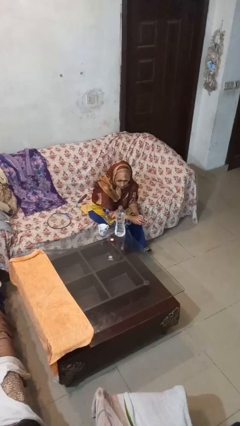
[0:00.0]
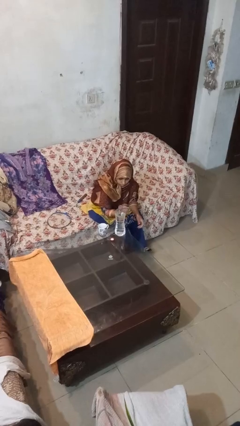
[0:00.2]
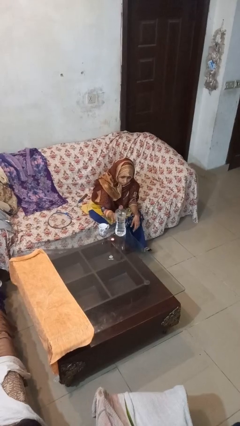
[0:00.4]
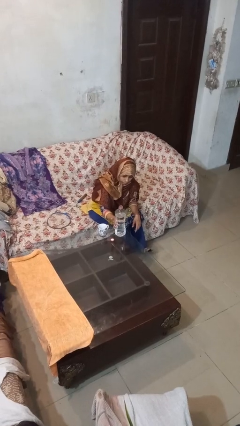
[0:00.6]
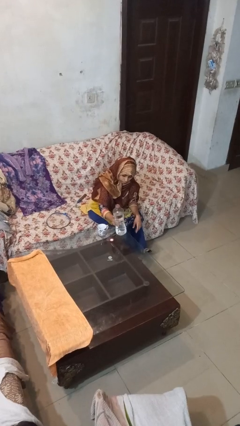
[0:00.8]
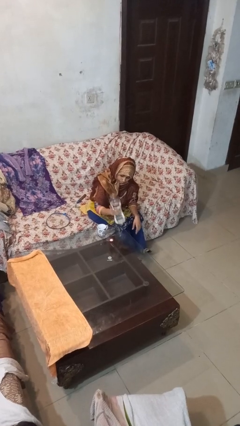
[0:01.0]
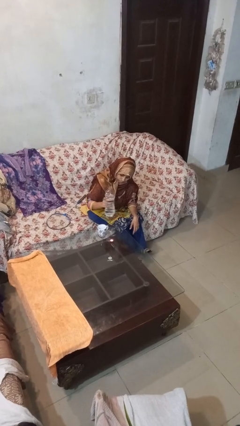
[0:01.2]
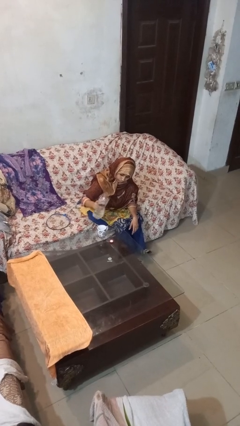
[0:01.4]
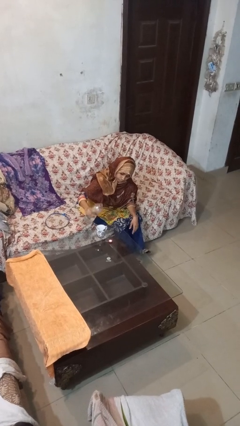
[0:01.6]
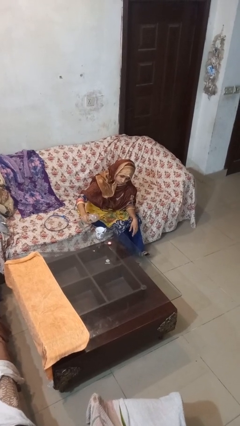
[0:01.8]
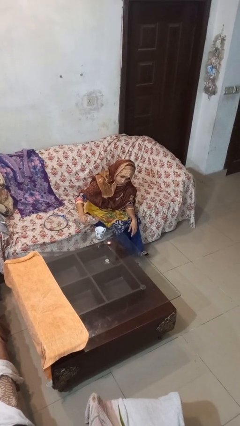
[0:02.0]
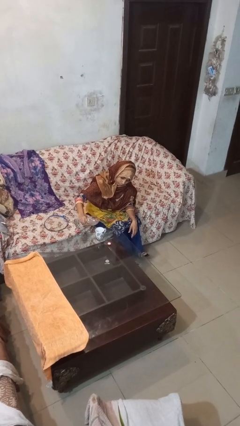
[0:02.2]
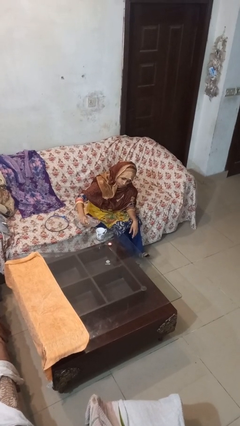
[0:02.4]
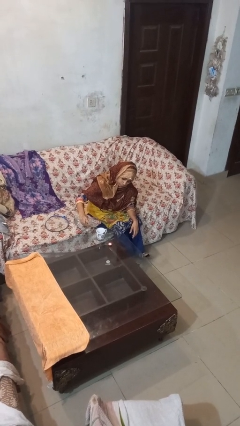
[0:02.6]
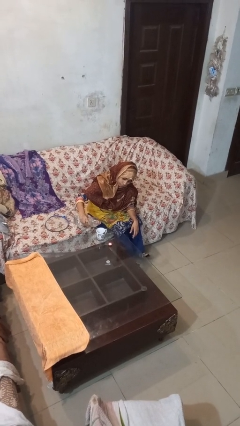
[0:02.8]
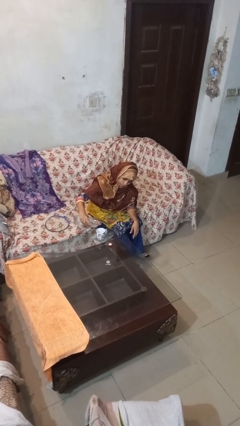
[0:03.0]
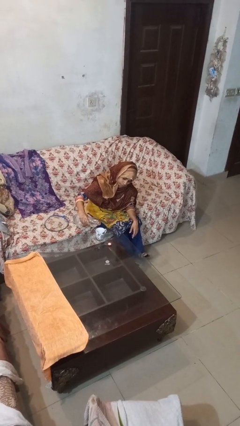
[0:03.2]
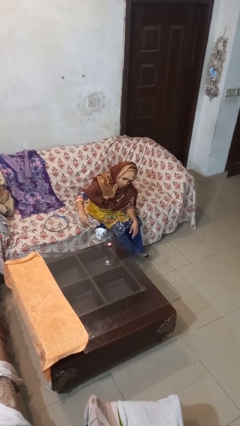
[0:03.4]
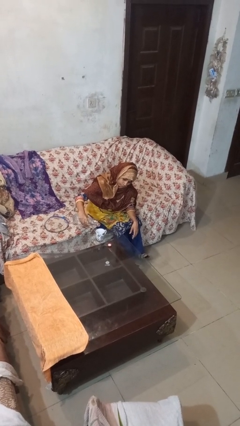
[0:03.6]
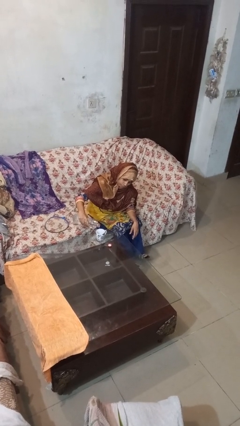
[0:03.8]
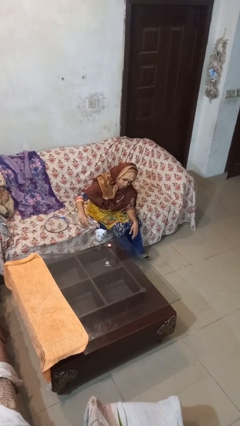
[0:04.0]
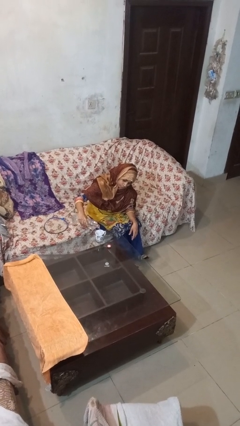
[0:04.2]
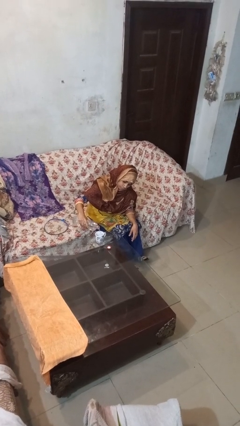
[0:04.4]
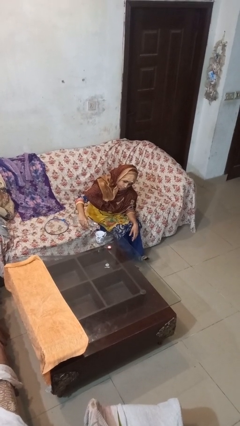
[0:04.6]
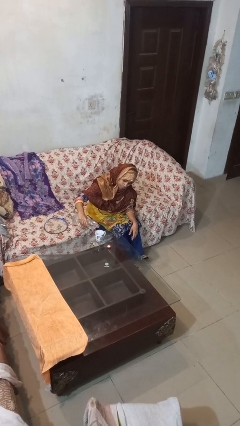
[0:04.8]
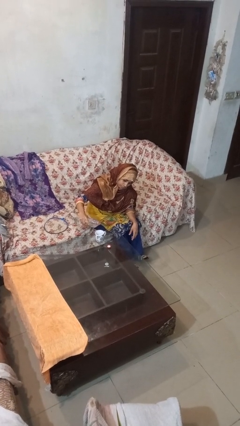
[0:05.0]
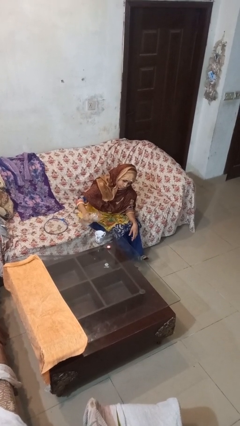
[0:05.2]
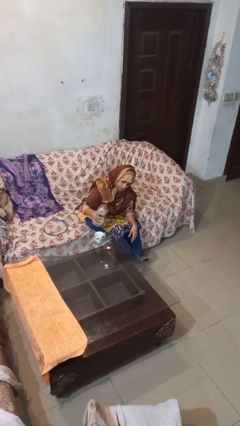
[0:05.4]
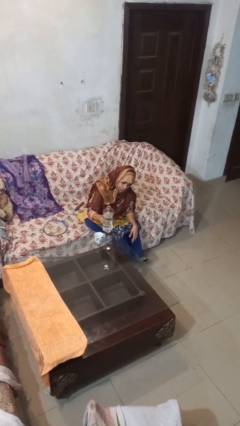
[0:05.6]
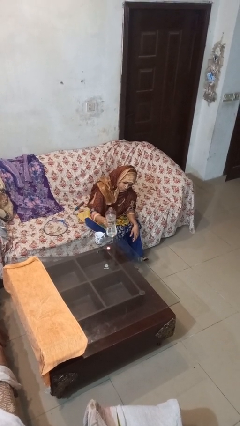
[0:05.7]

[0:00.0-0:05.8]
person pours liquid into cup

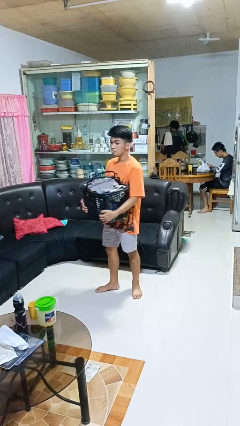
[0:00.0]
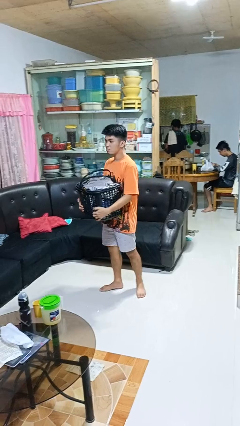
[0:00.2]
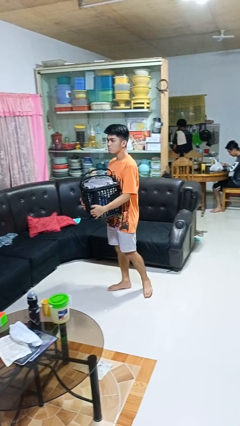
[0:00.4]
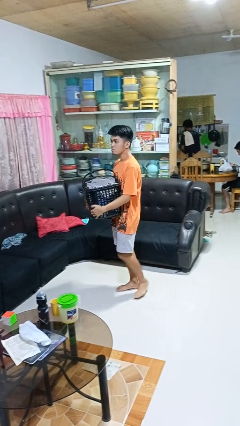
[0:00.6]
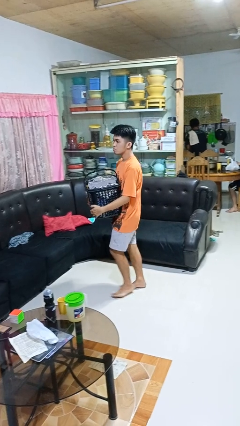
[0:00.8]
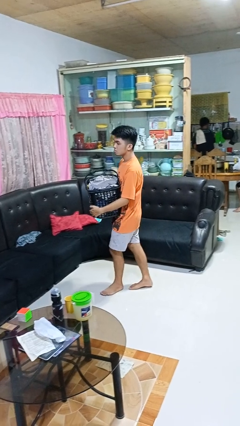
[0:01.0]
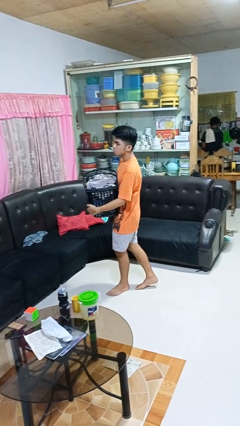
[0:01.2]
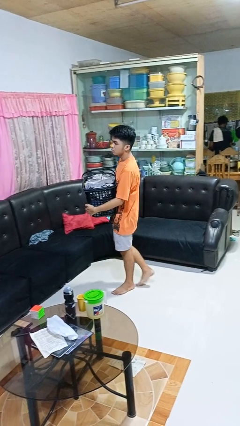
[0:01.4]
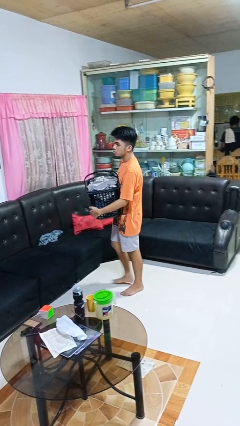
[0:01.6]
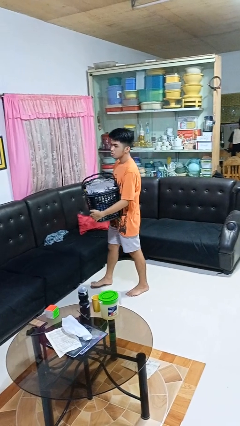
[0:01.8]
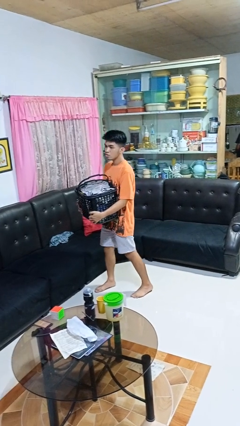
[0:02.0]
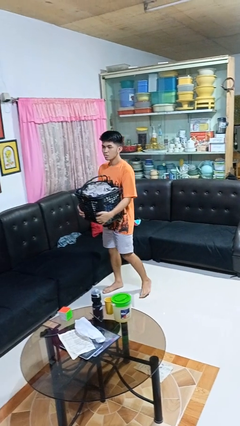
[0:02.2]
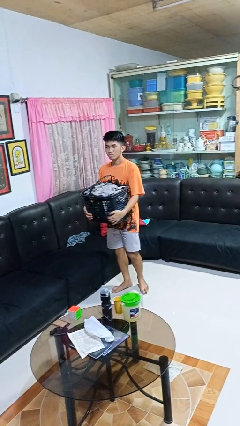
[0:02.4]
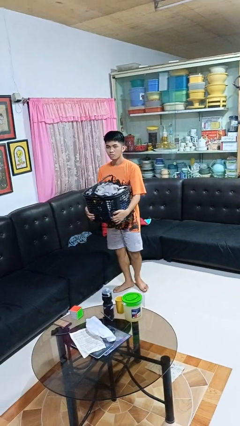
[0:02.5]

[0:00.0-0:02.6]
person carries laundry basket

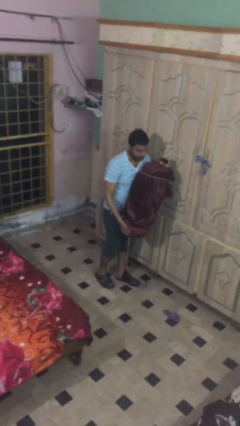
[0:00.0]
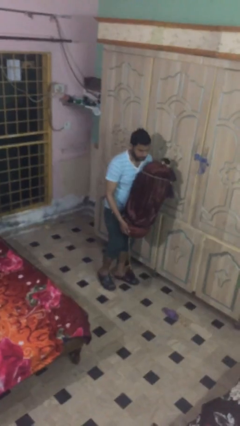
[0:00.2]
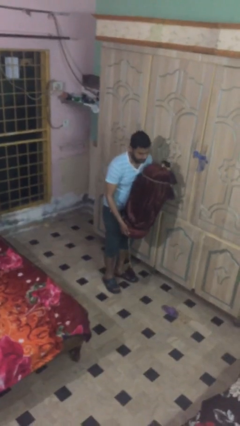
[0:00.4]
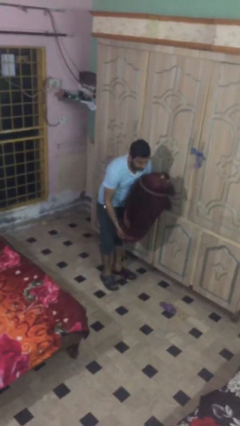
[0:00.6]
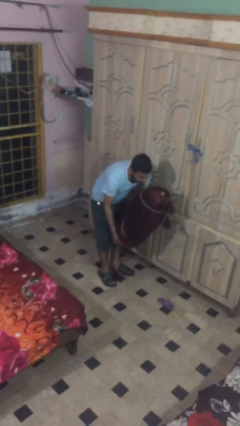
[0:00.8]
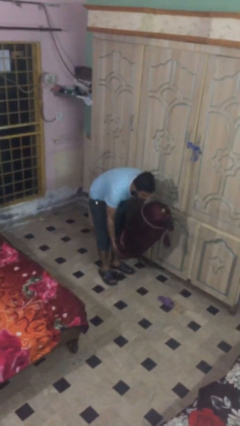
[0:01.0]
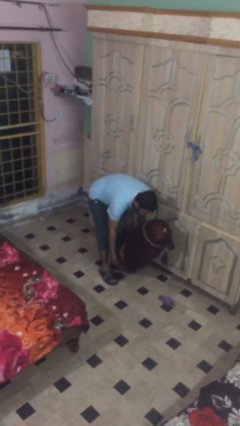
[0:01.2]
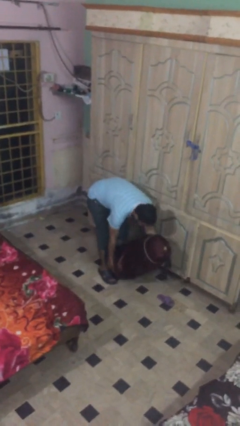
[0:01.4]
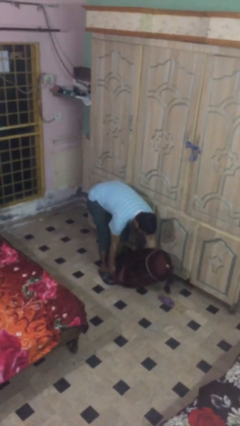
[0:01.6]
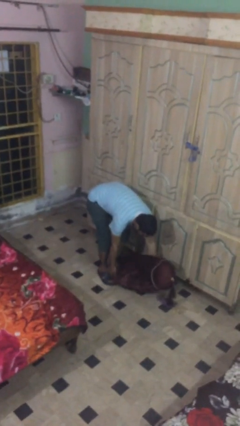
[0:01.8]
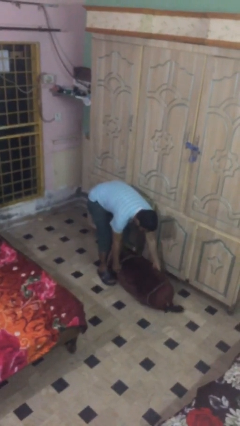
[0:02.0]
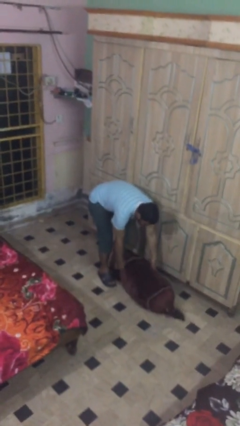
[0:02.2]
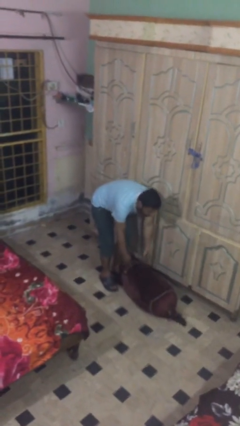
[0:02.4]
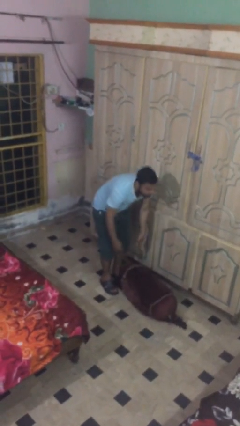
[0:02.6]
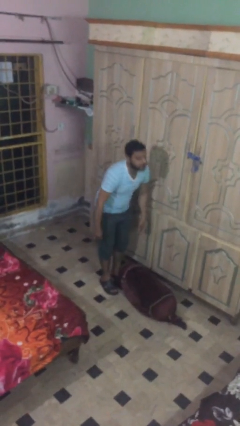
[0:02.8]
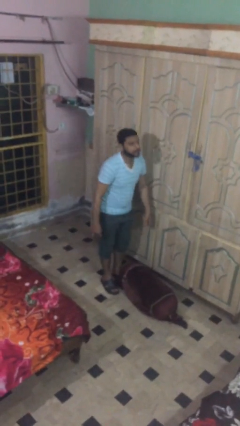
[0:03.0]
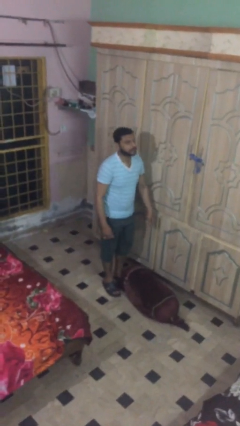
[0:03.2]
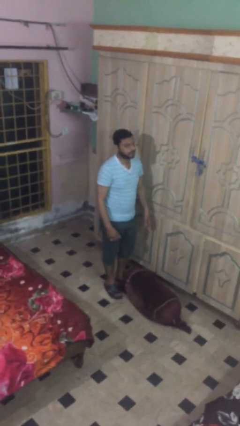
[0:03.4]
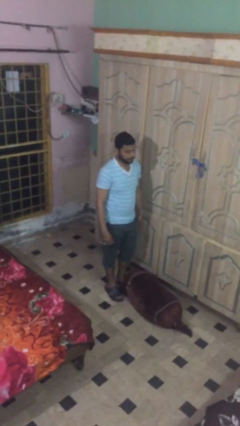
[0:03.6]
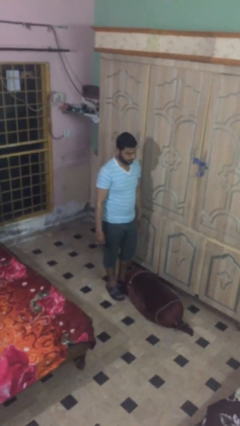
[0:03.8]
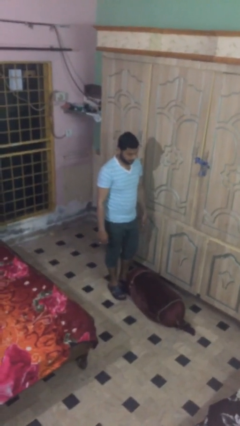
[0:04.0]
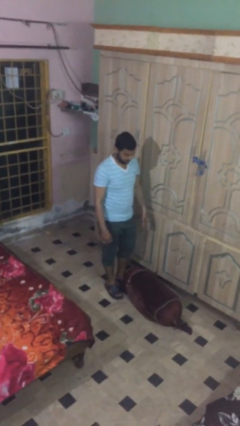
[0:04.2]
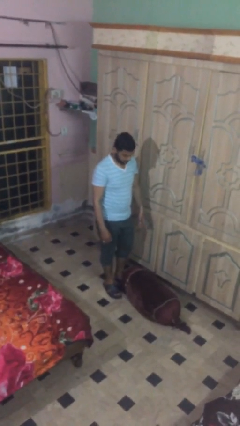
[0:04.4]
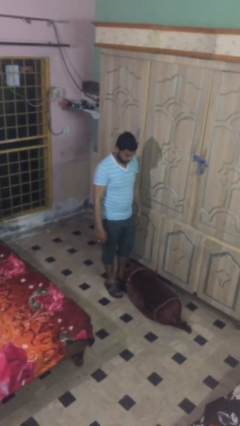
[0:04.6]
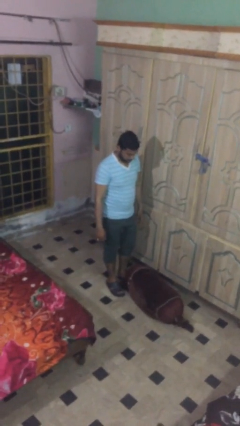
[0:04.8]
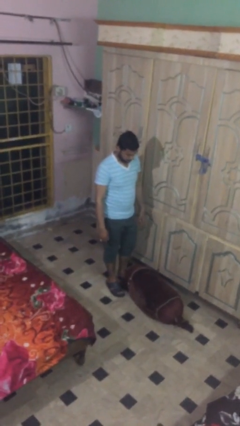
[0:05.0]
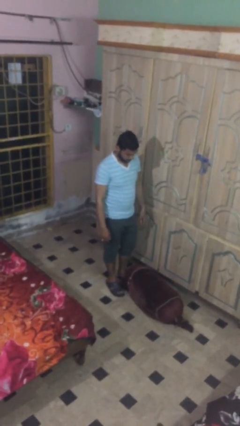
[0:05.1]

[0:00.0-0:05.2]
person puts down object on floor

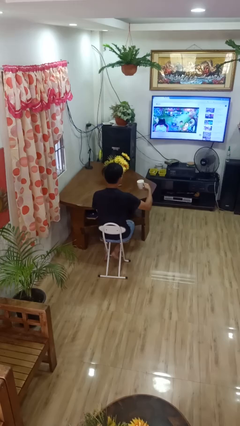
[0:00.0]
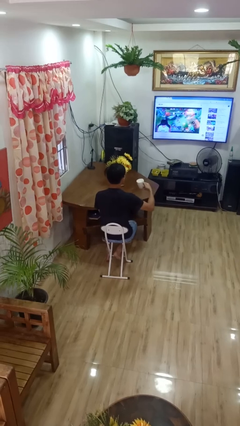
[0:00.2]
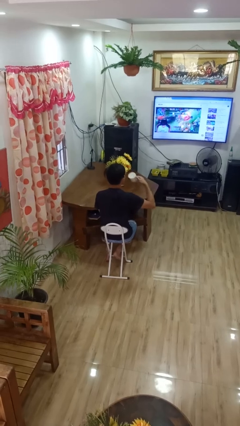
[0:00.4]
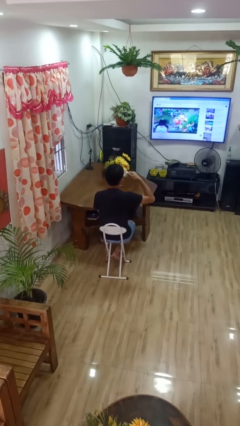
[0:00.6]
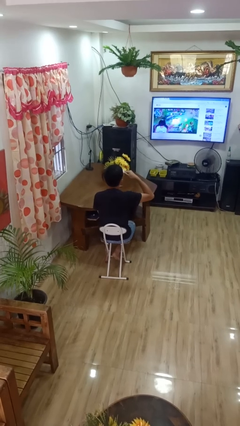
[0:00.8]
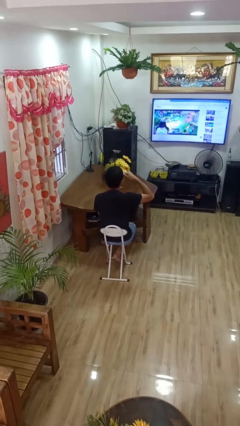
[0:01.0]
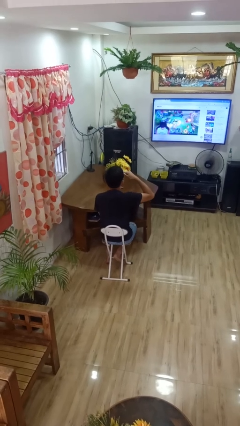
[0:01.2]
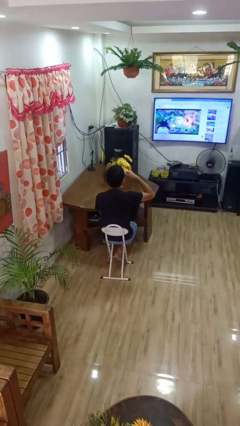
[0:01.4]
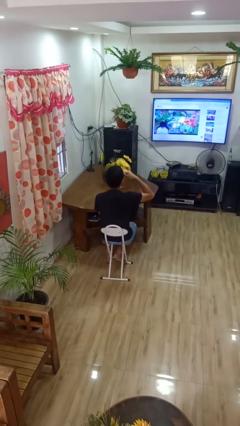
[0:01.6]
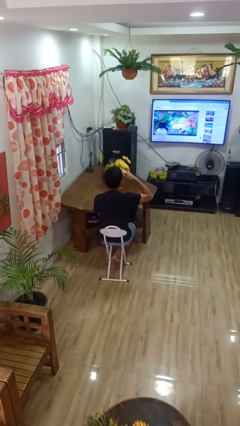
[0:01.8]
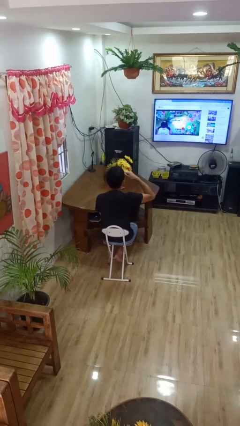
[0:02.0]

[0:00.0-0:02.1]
person drinks from mug

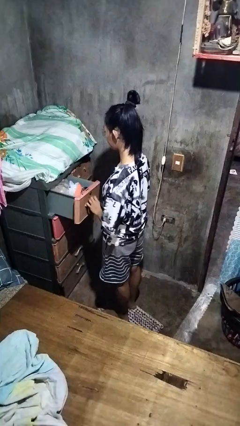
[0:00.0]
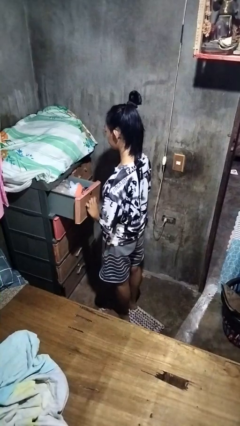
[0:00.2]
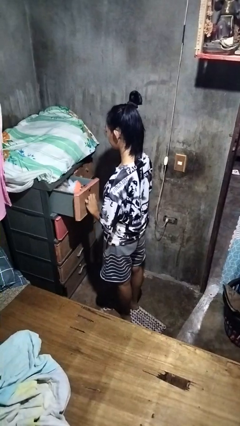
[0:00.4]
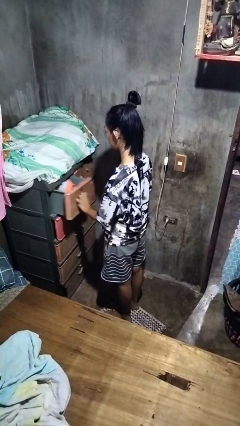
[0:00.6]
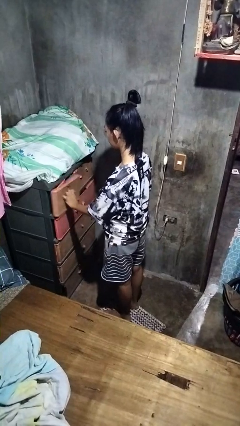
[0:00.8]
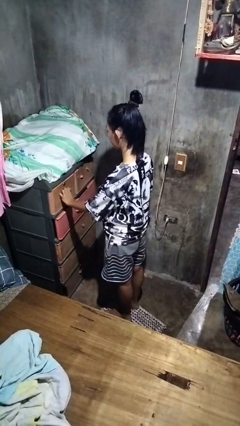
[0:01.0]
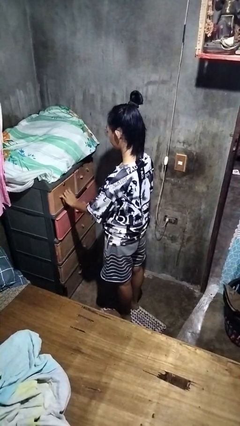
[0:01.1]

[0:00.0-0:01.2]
person closes dresser drawer

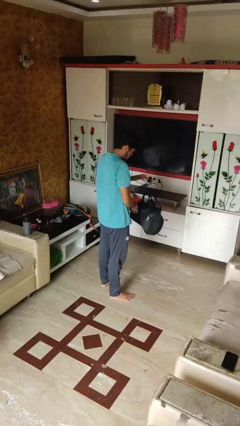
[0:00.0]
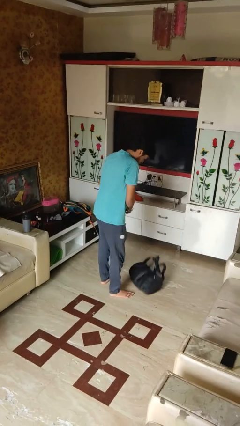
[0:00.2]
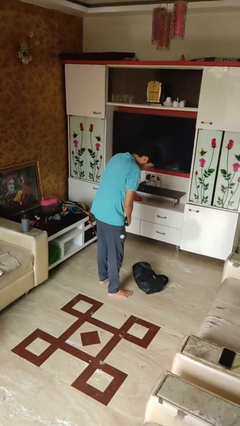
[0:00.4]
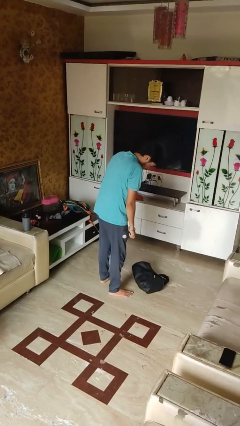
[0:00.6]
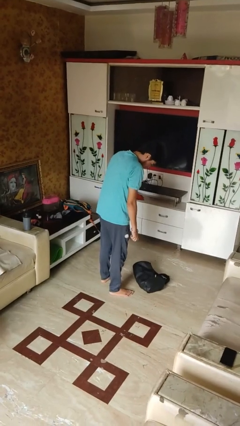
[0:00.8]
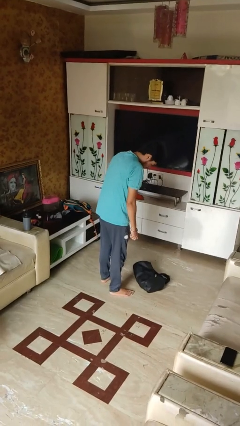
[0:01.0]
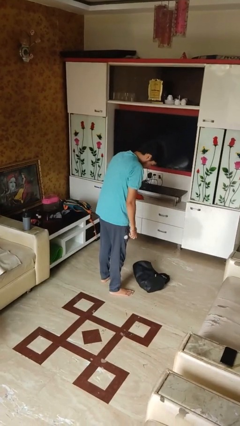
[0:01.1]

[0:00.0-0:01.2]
person drops object
